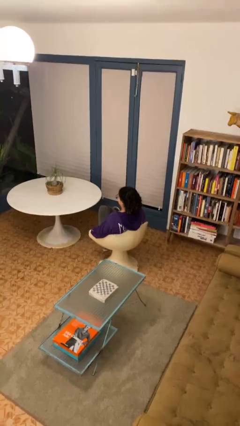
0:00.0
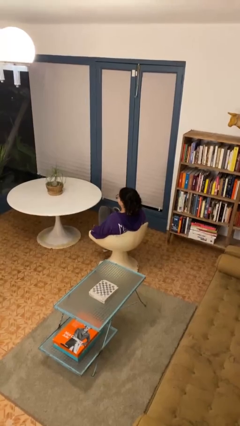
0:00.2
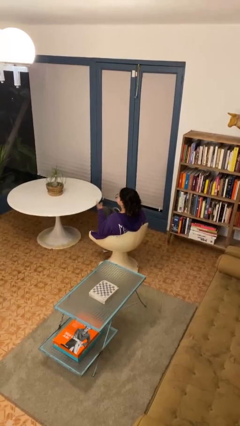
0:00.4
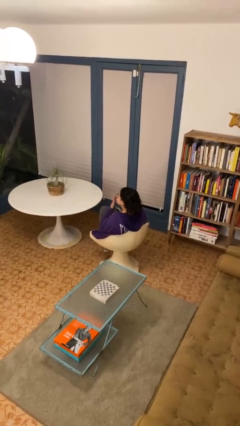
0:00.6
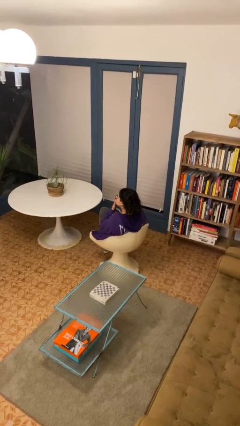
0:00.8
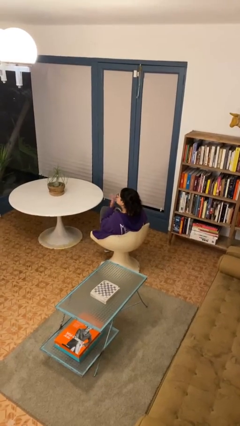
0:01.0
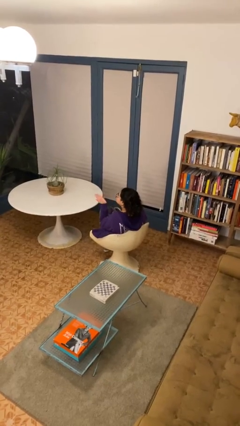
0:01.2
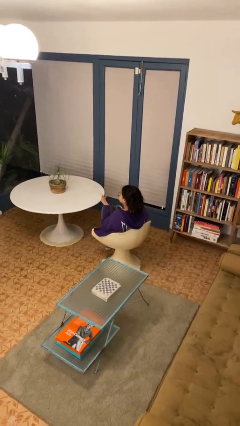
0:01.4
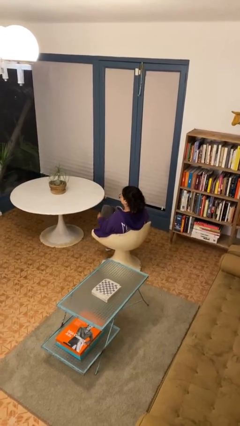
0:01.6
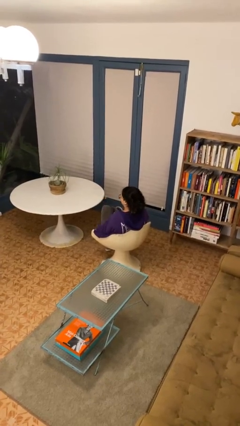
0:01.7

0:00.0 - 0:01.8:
person gestures blow kiss

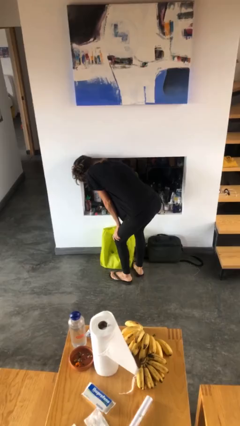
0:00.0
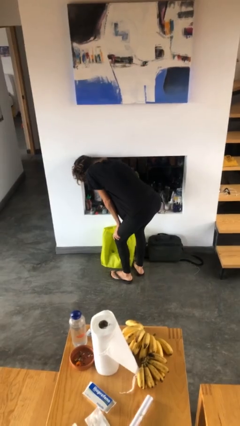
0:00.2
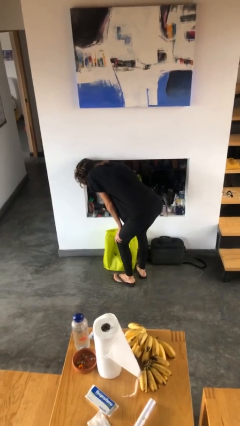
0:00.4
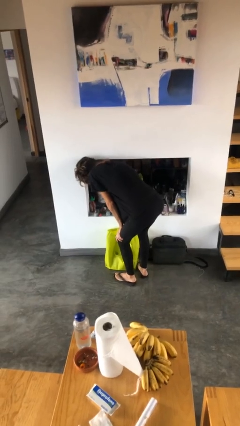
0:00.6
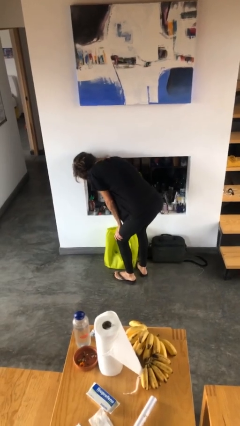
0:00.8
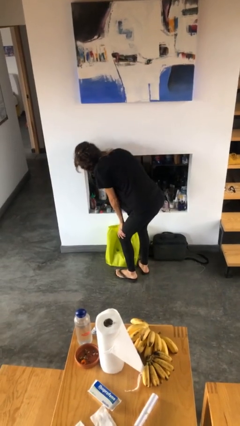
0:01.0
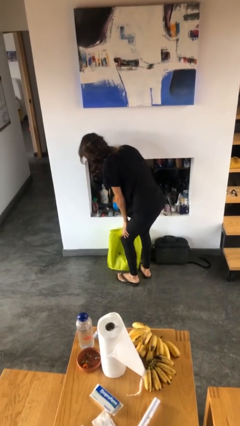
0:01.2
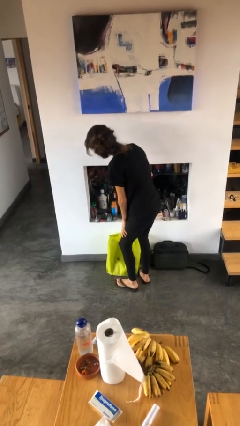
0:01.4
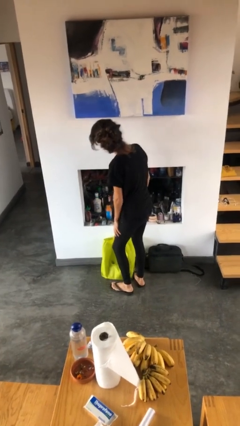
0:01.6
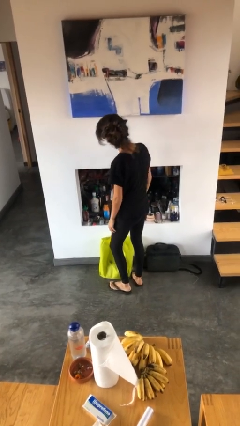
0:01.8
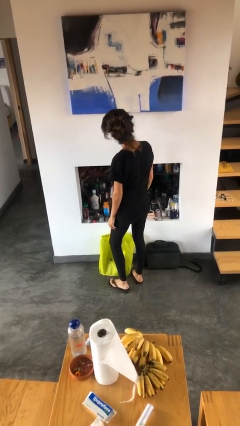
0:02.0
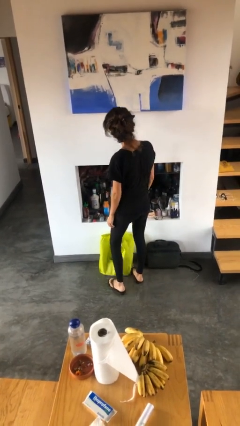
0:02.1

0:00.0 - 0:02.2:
person searches in cabinet

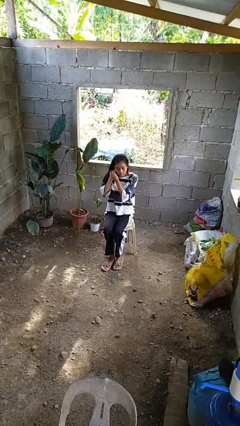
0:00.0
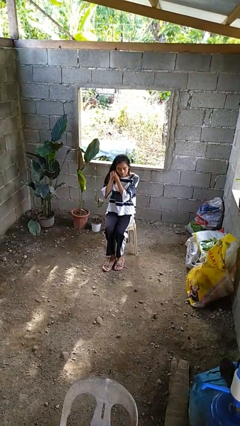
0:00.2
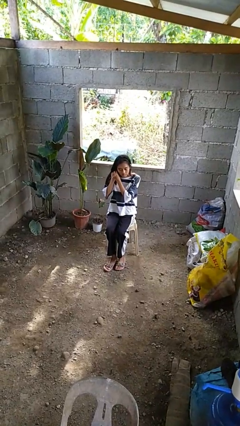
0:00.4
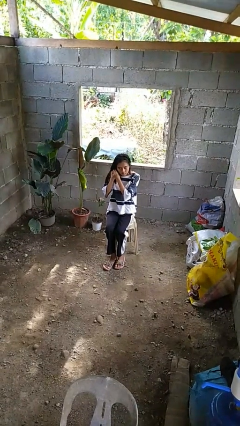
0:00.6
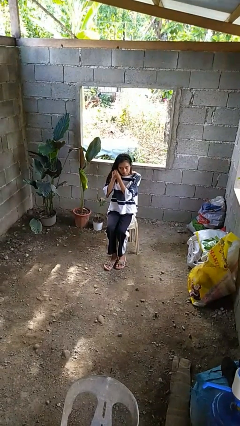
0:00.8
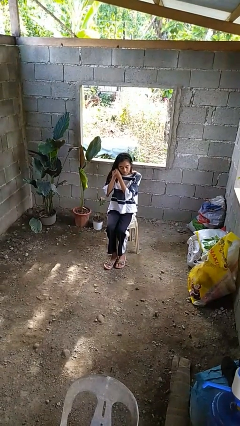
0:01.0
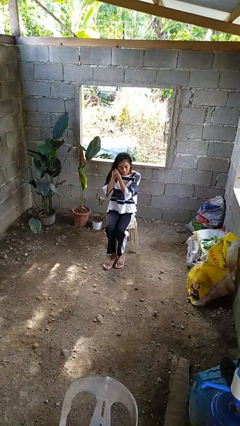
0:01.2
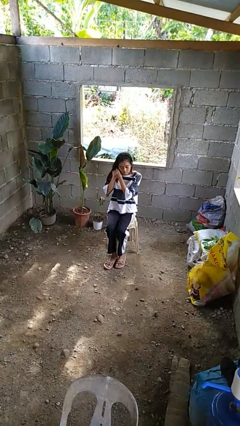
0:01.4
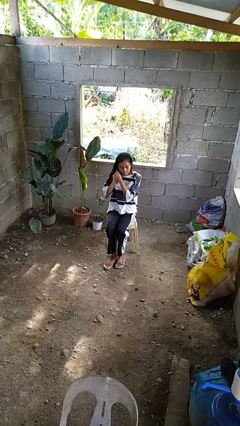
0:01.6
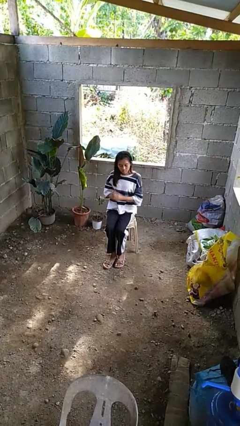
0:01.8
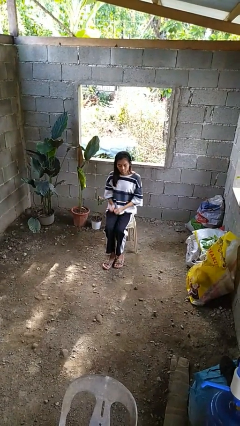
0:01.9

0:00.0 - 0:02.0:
person puts on earrings

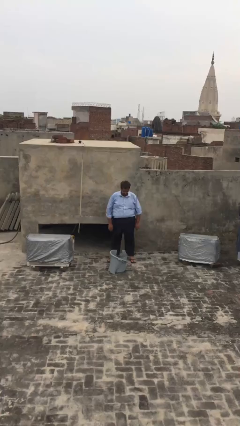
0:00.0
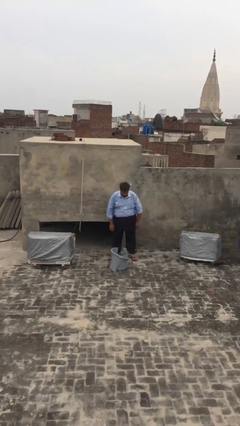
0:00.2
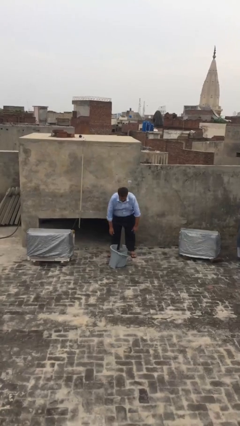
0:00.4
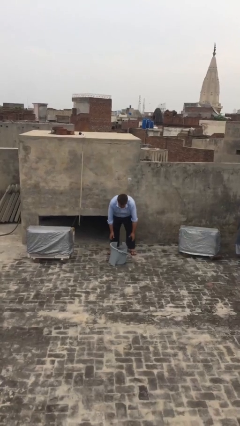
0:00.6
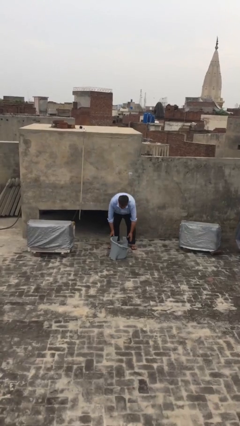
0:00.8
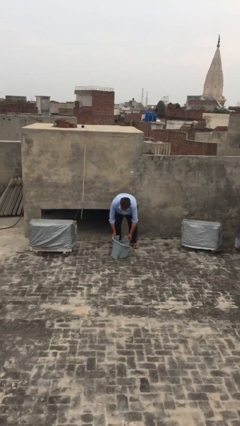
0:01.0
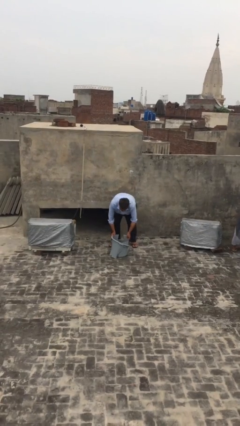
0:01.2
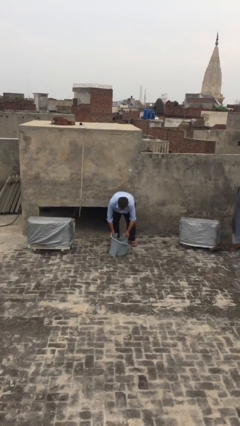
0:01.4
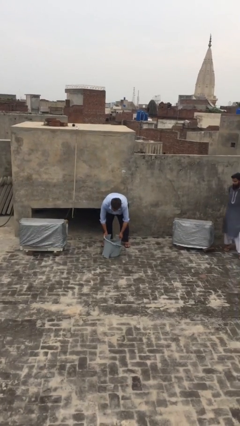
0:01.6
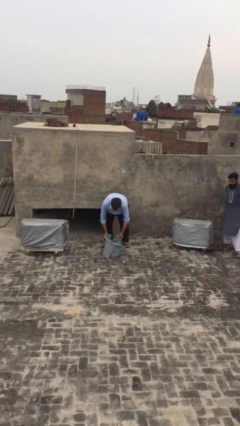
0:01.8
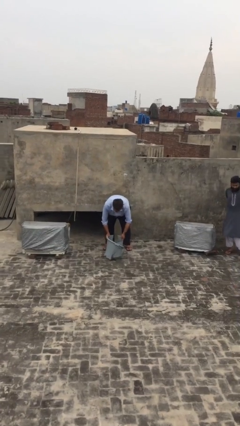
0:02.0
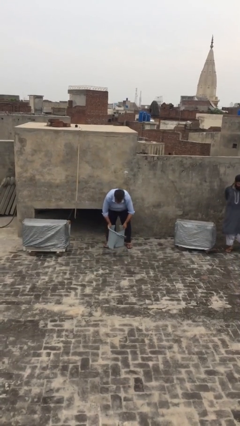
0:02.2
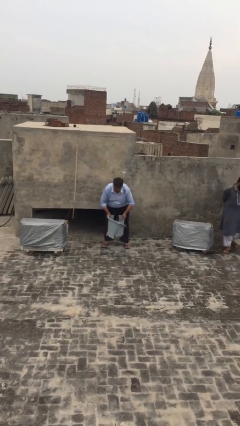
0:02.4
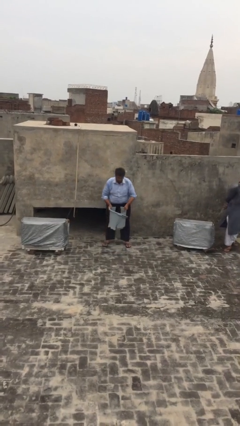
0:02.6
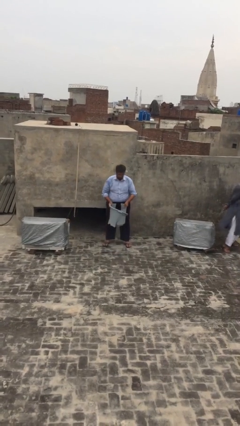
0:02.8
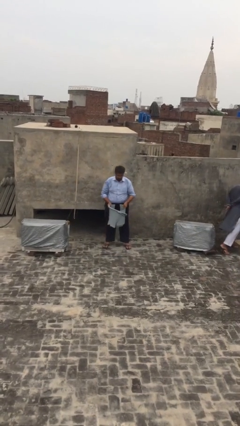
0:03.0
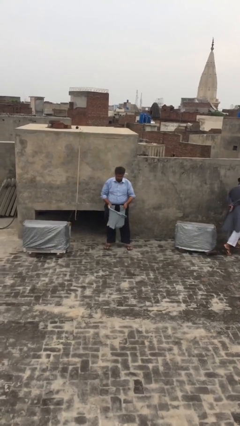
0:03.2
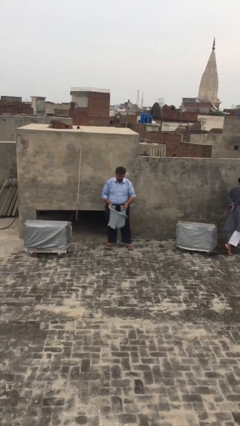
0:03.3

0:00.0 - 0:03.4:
person picks up object from floor

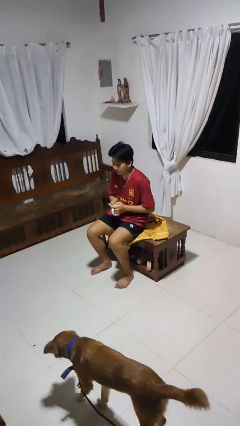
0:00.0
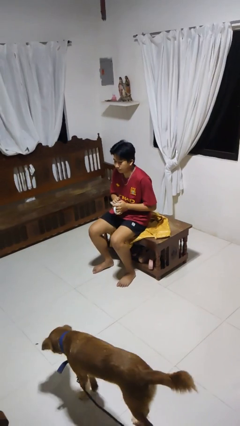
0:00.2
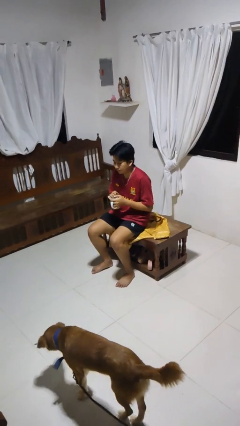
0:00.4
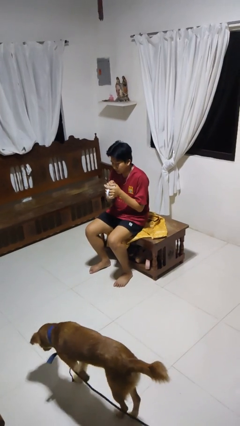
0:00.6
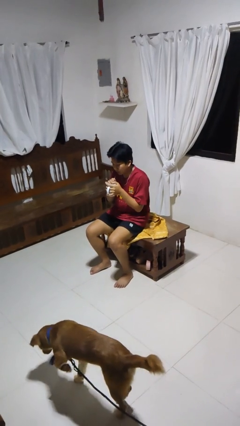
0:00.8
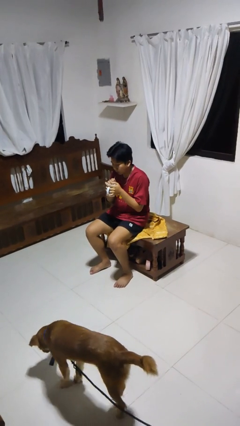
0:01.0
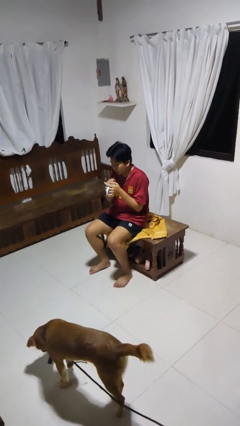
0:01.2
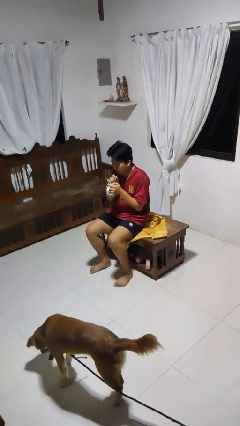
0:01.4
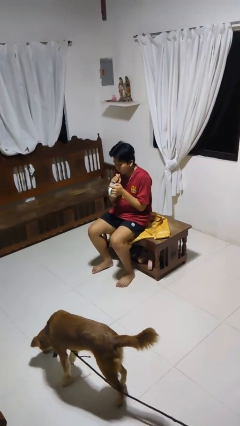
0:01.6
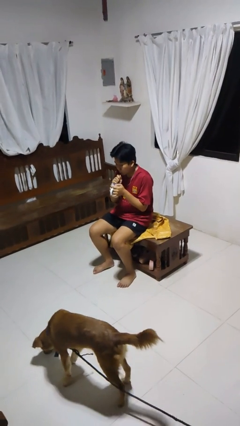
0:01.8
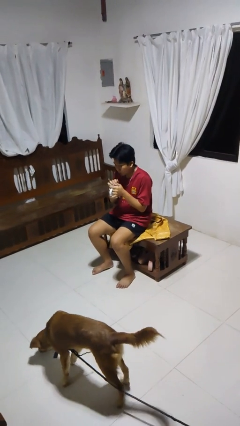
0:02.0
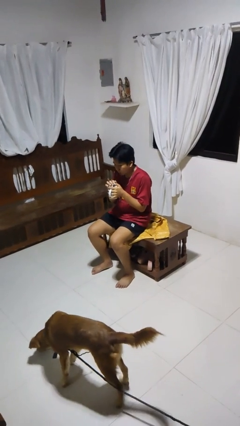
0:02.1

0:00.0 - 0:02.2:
person drinks from straw

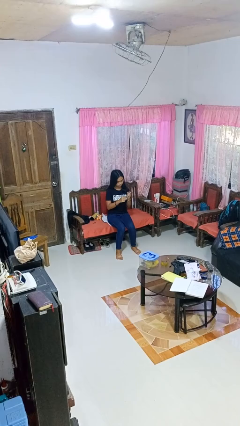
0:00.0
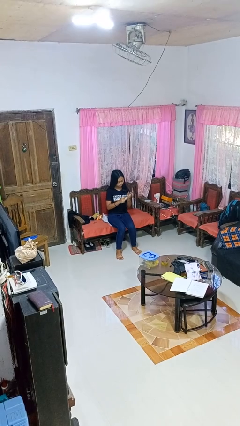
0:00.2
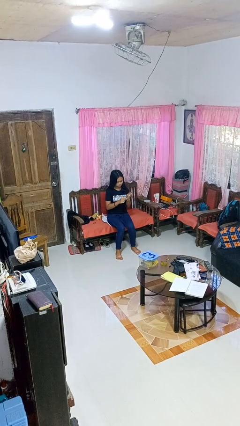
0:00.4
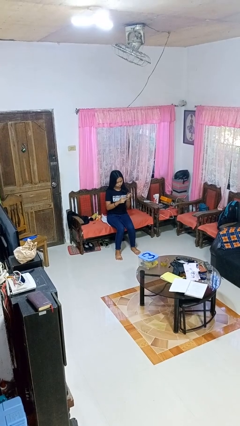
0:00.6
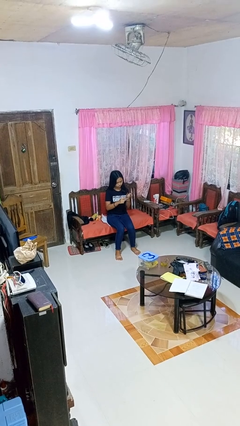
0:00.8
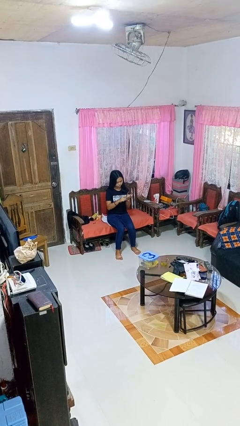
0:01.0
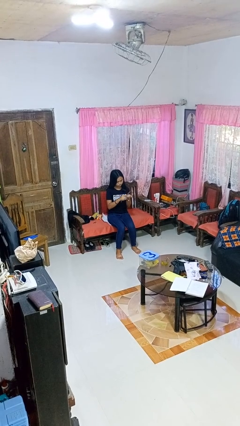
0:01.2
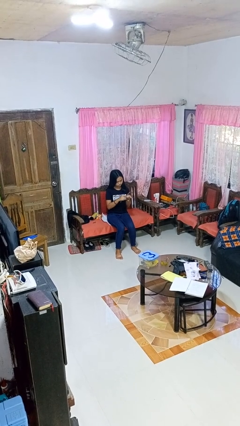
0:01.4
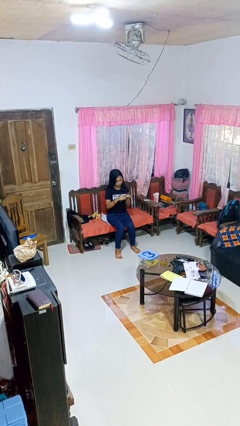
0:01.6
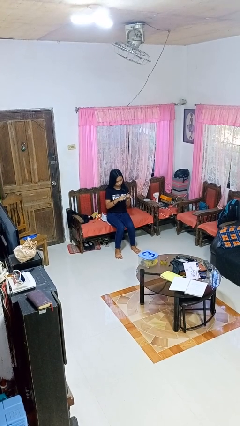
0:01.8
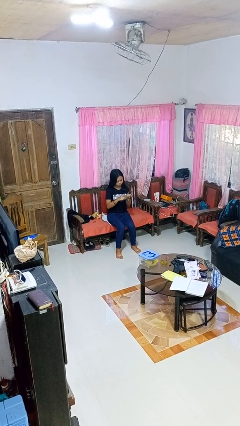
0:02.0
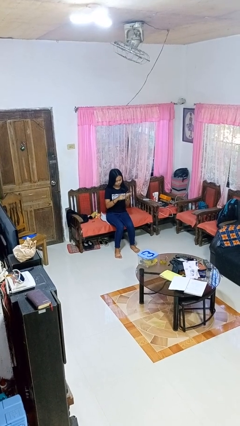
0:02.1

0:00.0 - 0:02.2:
person files fingernails

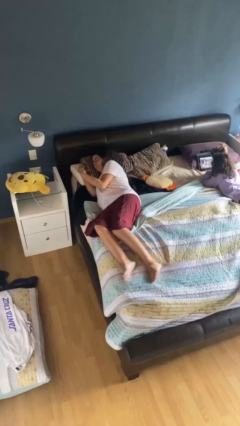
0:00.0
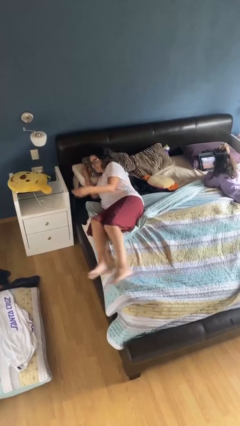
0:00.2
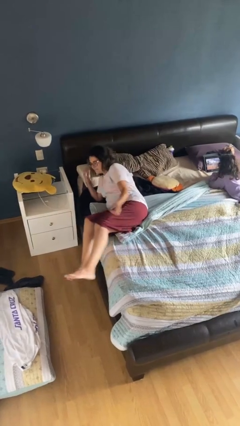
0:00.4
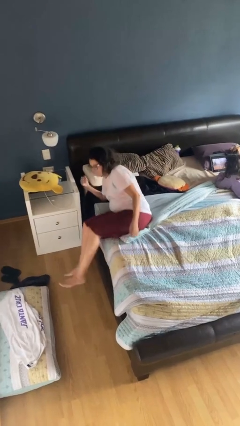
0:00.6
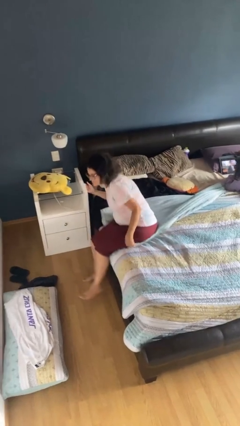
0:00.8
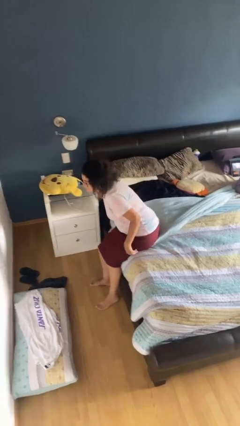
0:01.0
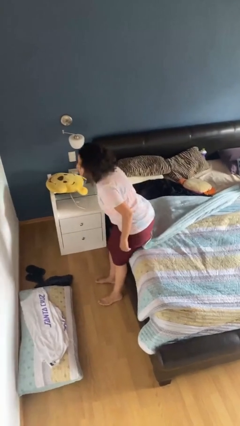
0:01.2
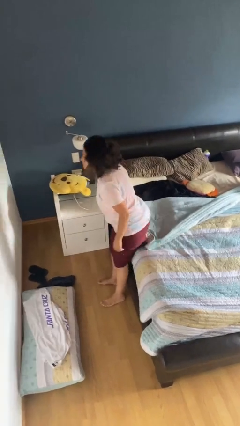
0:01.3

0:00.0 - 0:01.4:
person stands up

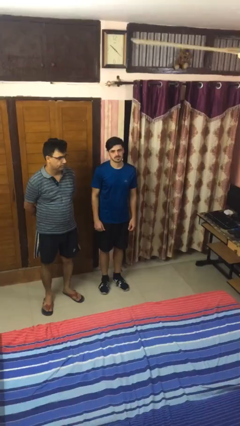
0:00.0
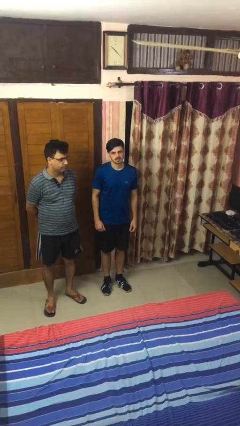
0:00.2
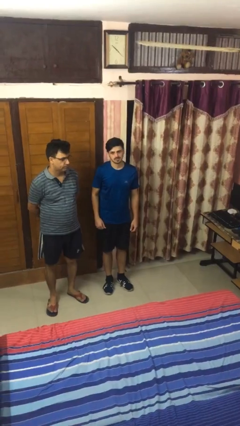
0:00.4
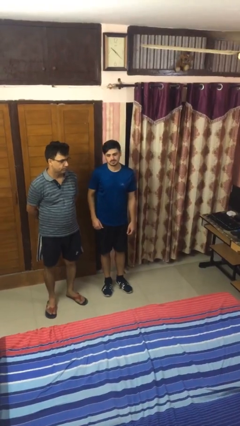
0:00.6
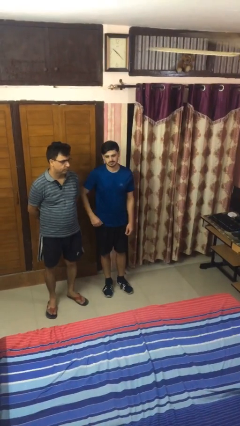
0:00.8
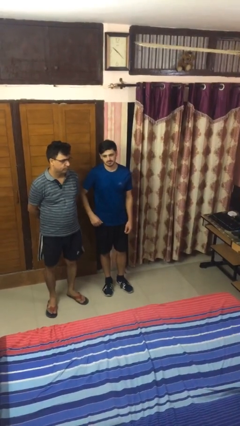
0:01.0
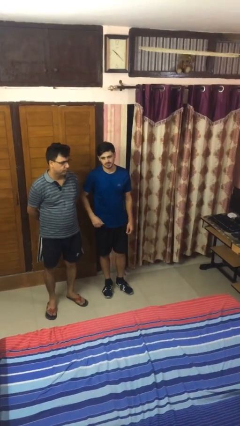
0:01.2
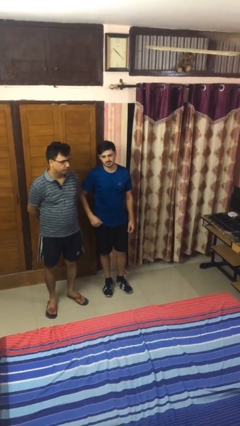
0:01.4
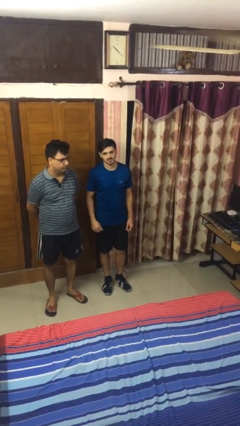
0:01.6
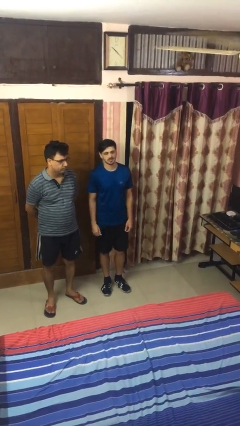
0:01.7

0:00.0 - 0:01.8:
person nudges person with elbow
